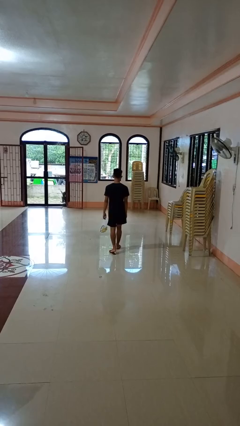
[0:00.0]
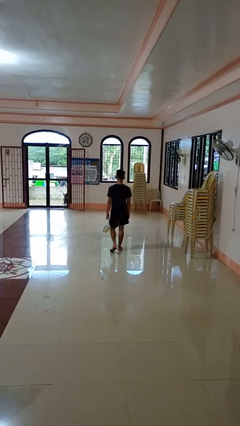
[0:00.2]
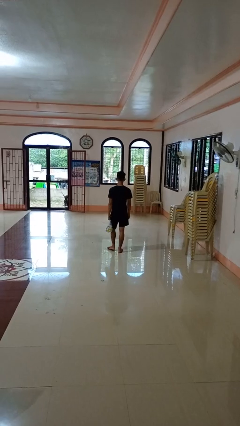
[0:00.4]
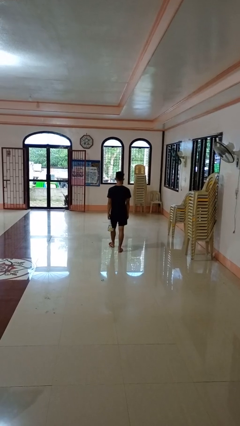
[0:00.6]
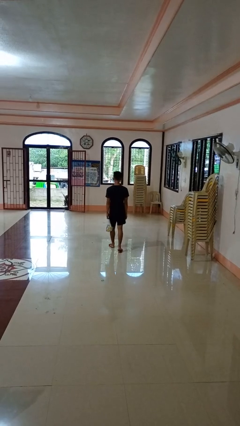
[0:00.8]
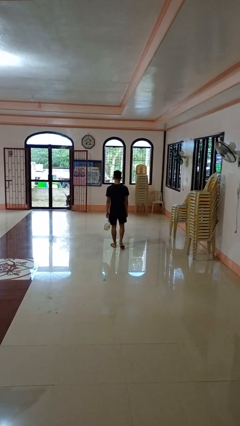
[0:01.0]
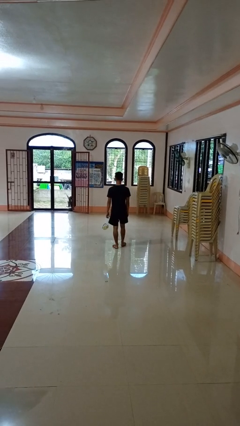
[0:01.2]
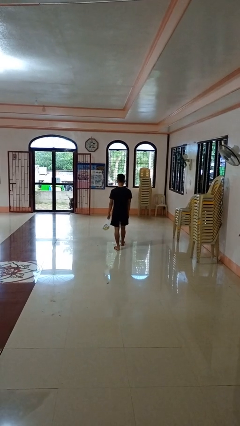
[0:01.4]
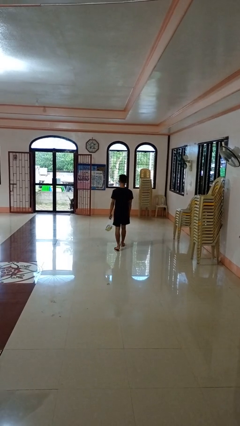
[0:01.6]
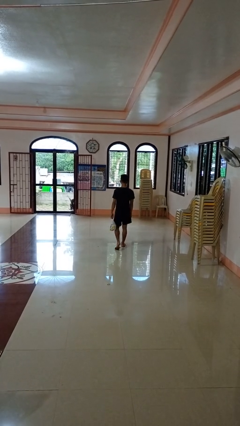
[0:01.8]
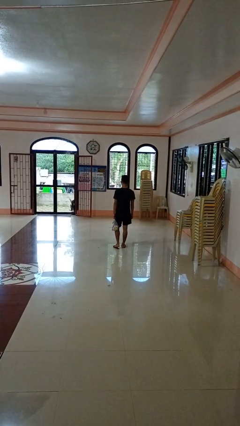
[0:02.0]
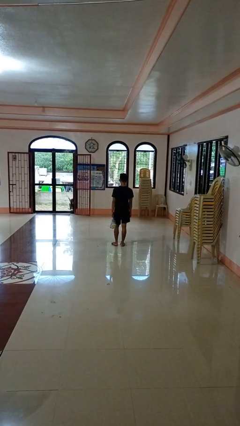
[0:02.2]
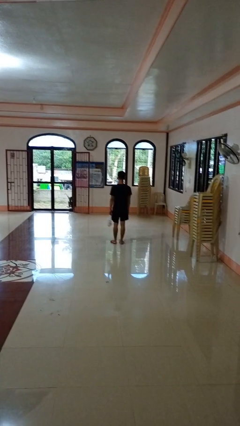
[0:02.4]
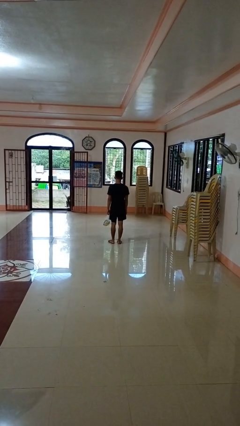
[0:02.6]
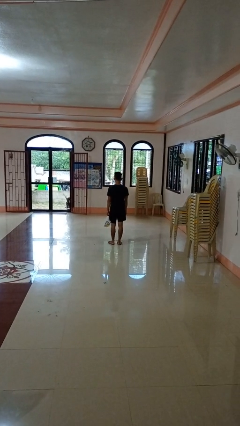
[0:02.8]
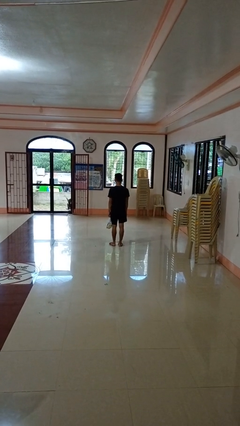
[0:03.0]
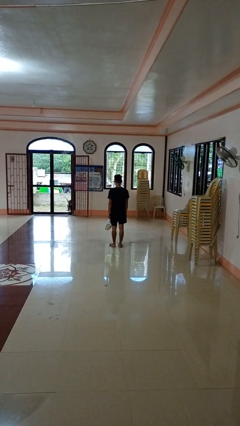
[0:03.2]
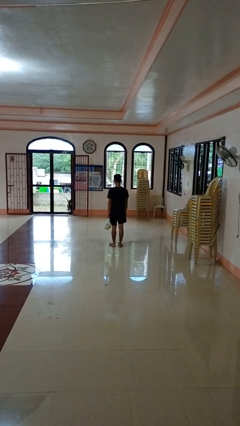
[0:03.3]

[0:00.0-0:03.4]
person carries groceries

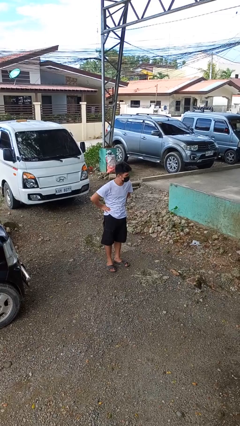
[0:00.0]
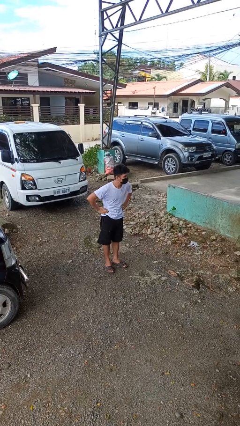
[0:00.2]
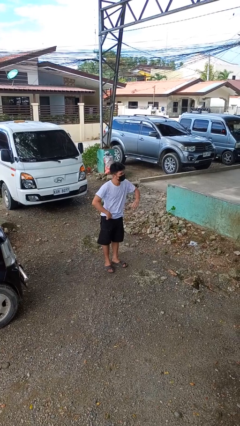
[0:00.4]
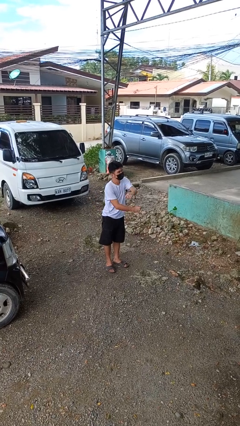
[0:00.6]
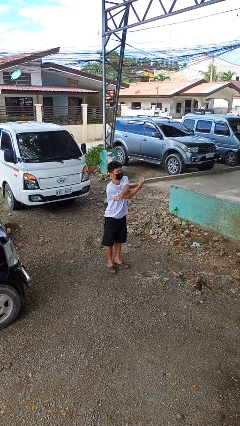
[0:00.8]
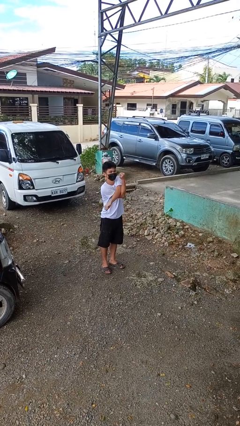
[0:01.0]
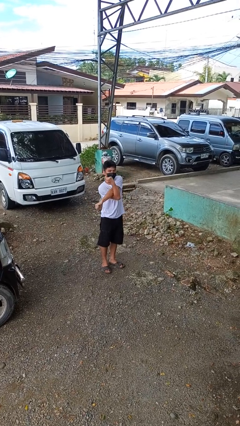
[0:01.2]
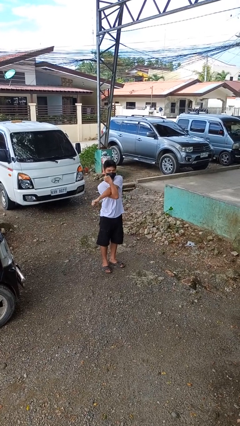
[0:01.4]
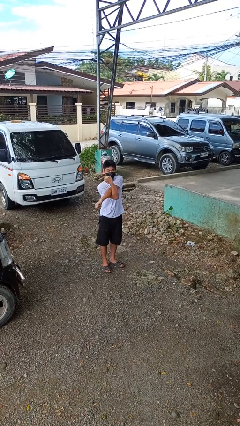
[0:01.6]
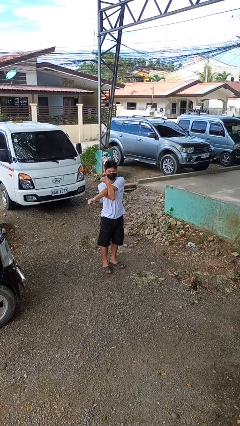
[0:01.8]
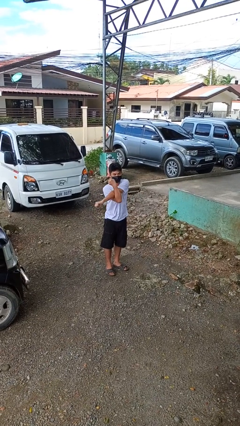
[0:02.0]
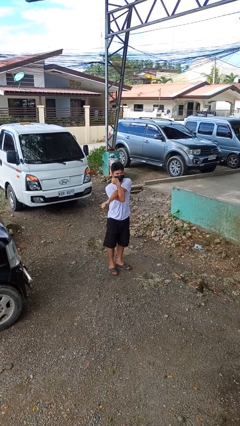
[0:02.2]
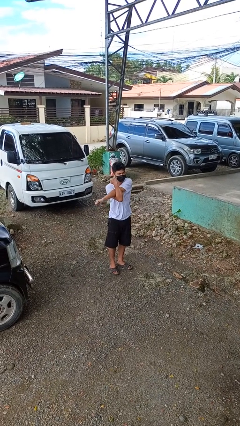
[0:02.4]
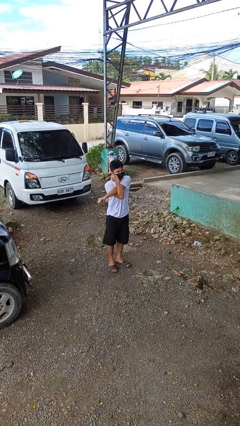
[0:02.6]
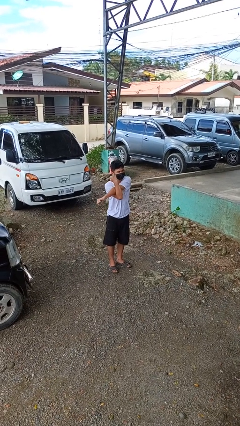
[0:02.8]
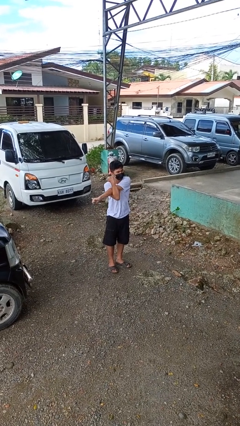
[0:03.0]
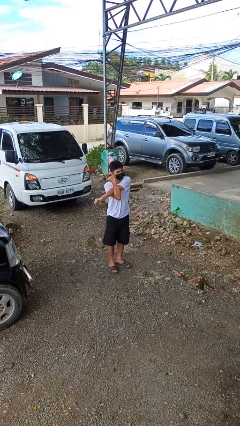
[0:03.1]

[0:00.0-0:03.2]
person stretches arms to side

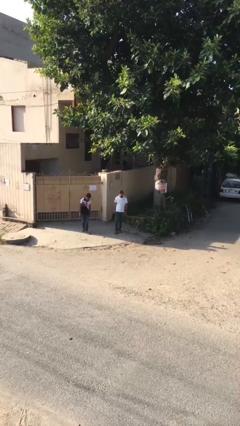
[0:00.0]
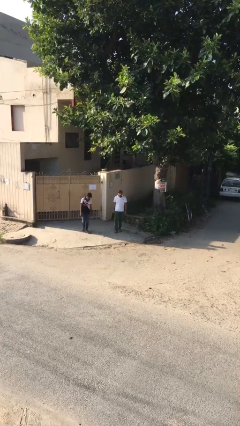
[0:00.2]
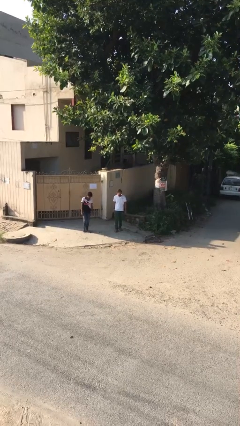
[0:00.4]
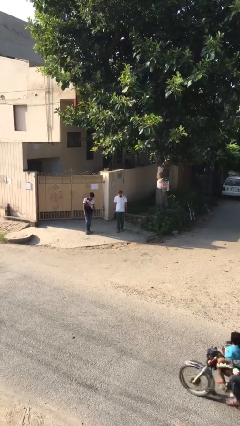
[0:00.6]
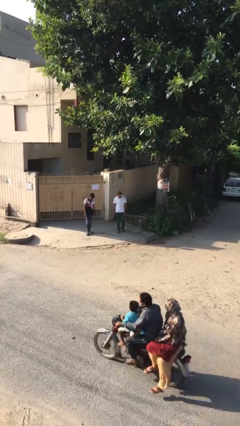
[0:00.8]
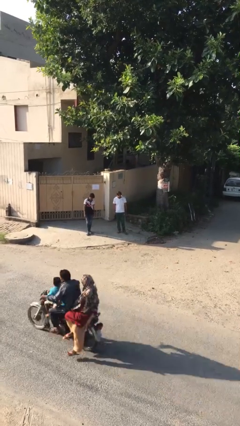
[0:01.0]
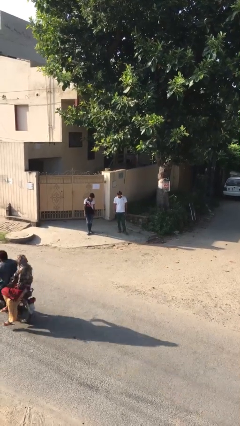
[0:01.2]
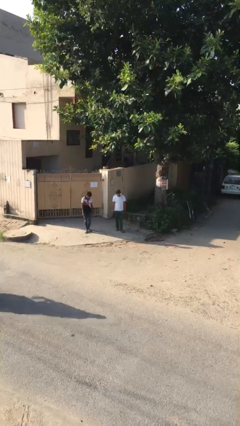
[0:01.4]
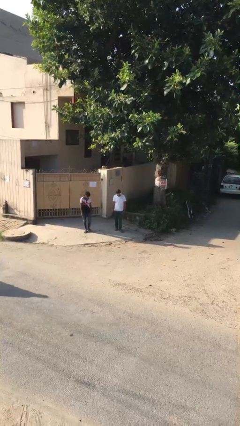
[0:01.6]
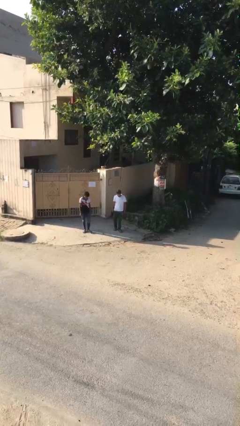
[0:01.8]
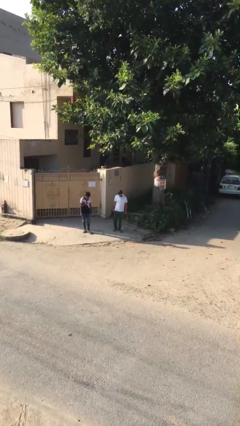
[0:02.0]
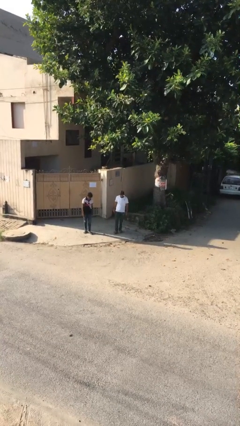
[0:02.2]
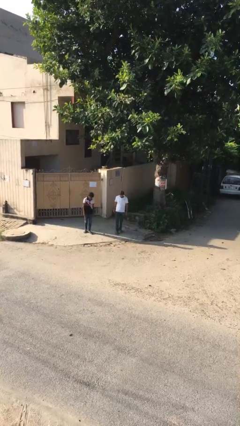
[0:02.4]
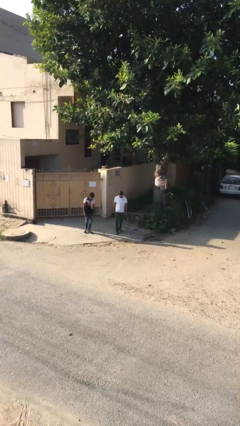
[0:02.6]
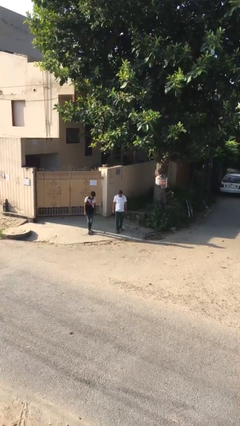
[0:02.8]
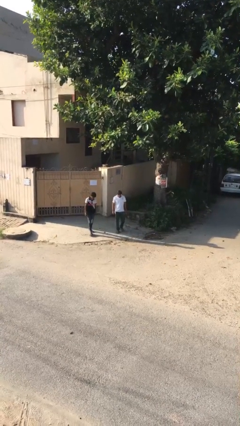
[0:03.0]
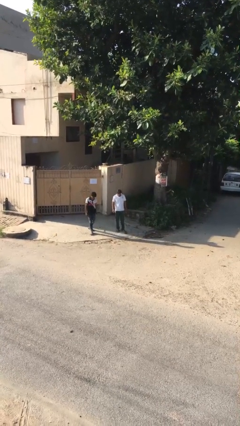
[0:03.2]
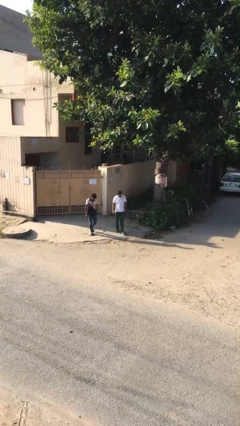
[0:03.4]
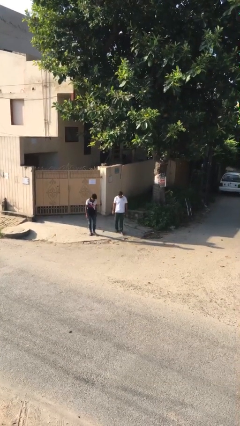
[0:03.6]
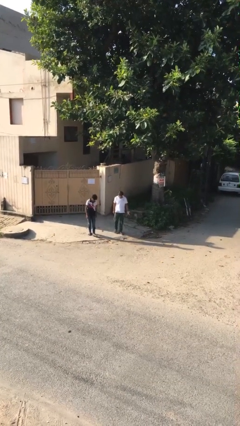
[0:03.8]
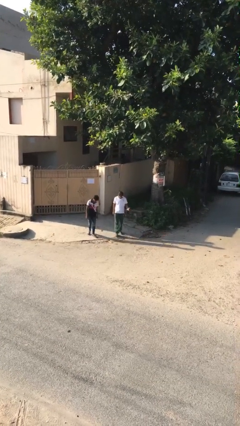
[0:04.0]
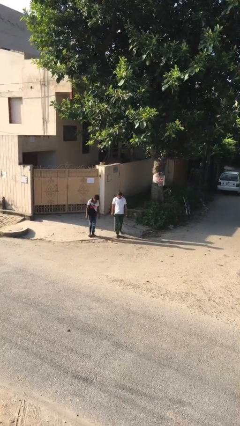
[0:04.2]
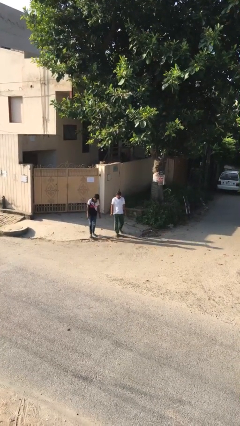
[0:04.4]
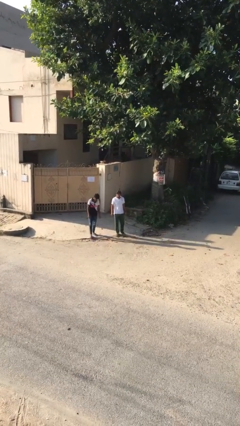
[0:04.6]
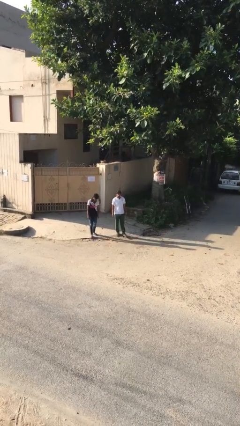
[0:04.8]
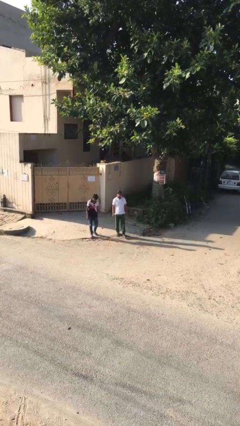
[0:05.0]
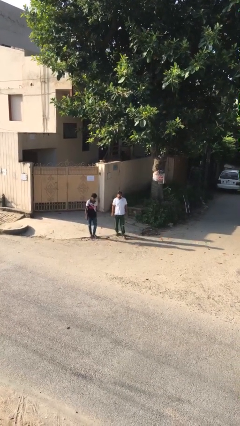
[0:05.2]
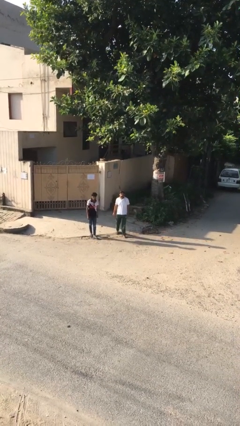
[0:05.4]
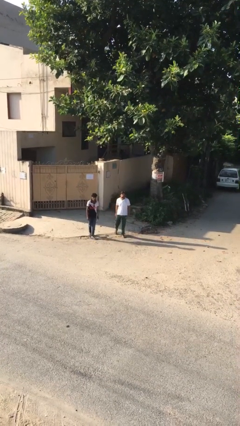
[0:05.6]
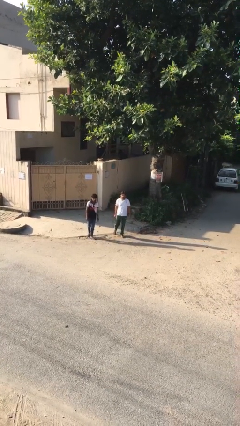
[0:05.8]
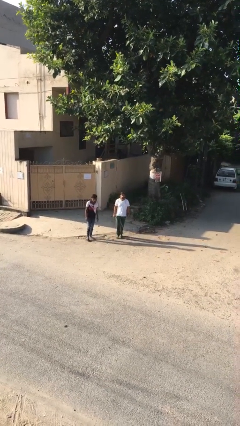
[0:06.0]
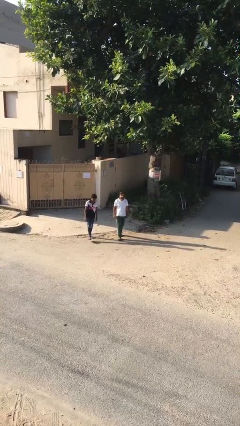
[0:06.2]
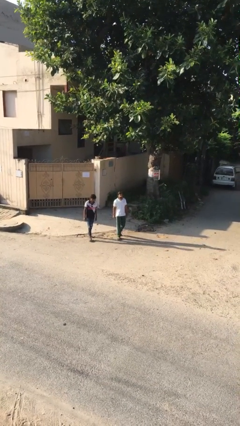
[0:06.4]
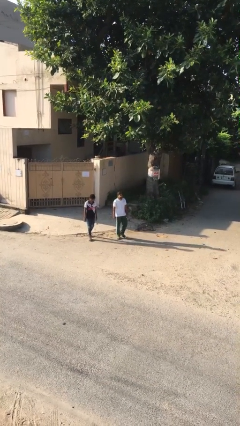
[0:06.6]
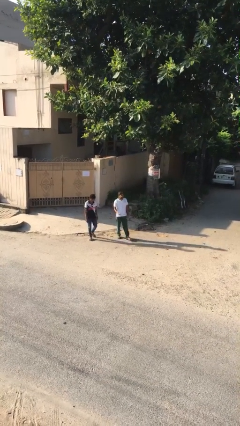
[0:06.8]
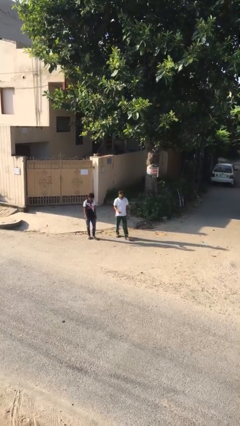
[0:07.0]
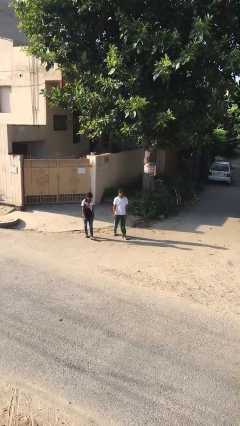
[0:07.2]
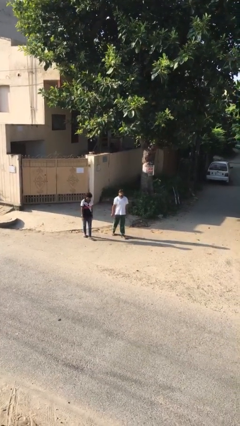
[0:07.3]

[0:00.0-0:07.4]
person talks to person

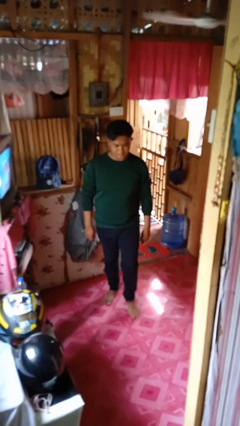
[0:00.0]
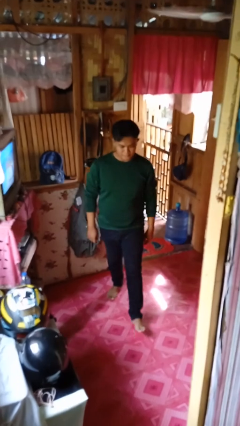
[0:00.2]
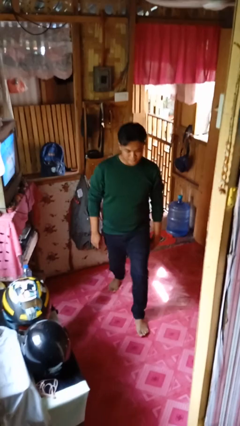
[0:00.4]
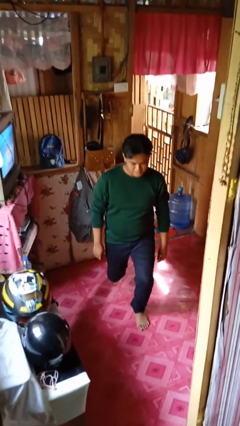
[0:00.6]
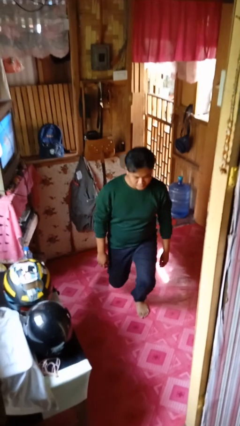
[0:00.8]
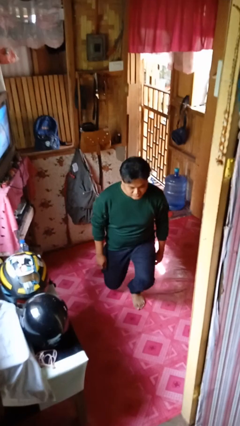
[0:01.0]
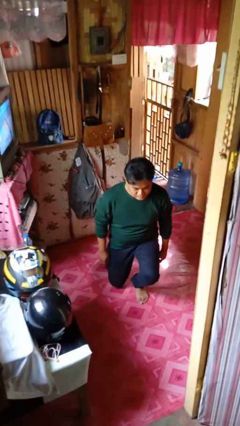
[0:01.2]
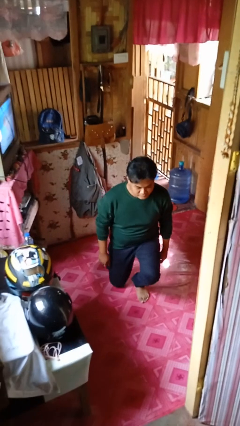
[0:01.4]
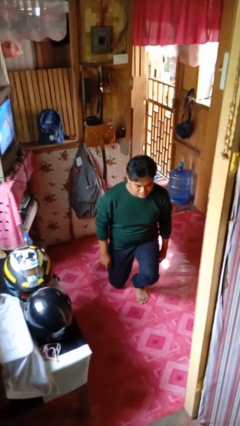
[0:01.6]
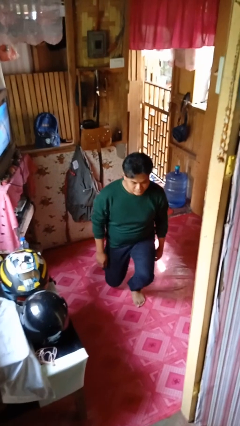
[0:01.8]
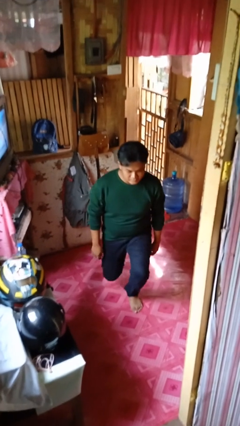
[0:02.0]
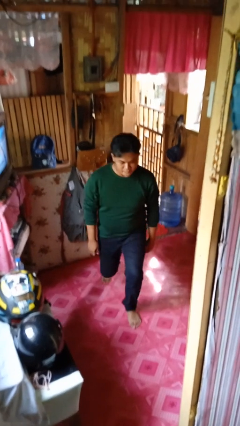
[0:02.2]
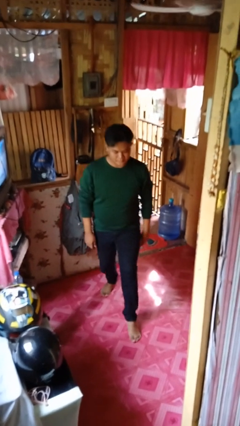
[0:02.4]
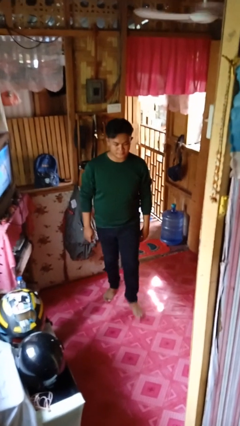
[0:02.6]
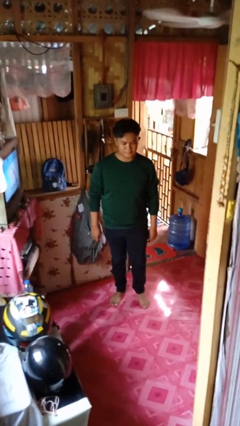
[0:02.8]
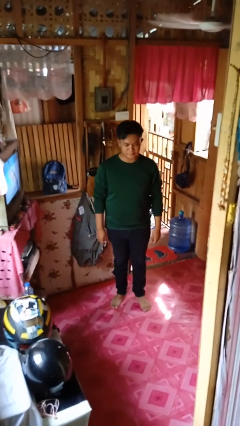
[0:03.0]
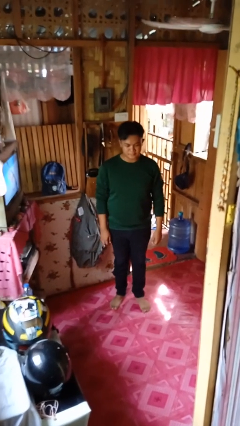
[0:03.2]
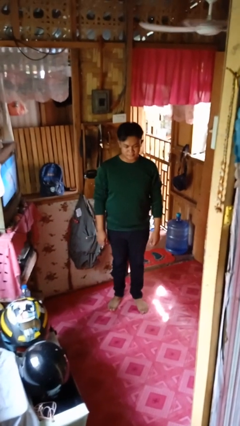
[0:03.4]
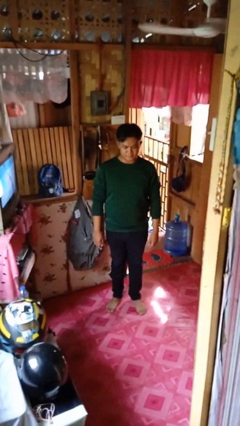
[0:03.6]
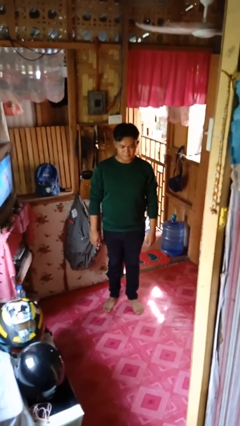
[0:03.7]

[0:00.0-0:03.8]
person exercises with lunges

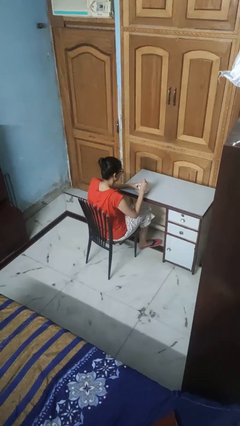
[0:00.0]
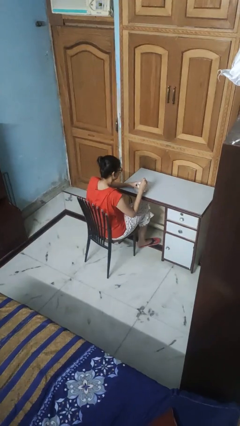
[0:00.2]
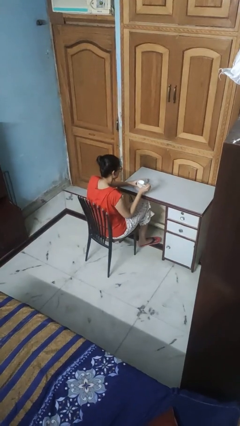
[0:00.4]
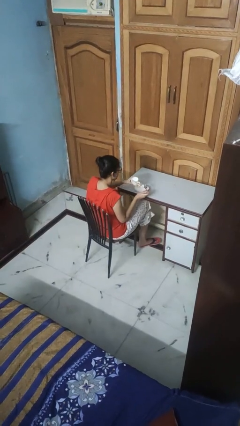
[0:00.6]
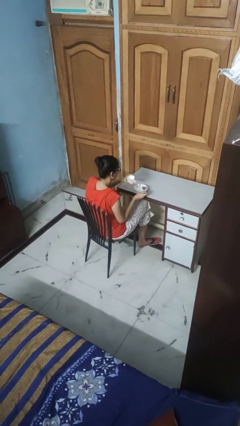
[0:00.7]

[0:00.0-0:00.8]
person stirs mug
